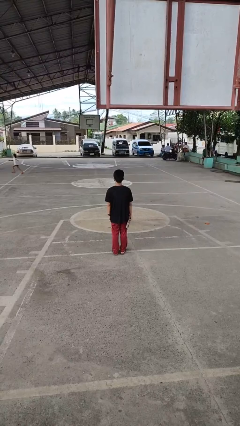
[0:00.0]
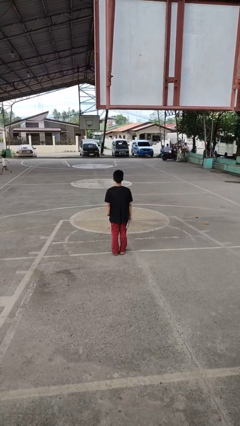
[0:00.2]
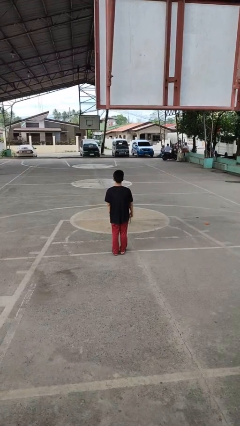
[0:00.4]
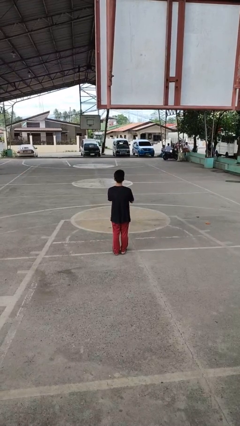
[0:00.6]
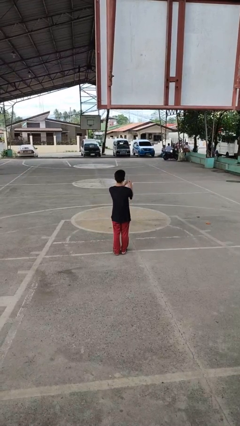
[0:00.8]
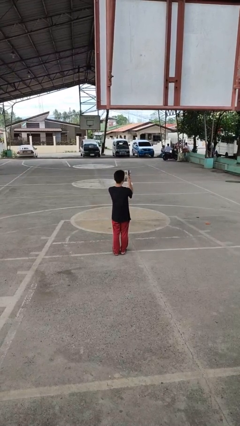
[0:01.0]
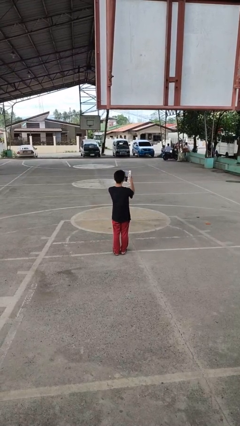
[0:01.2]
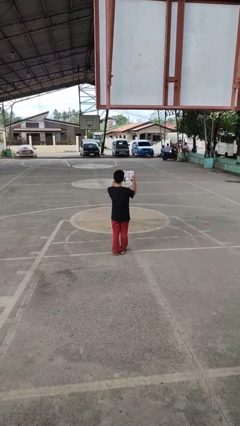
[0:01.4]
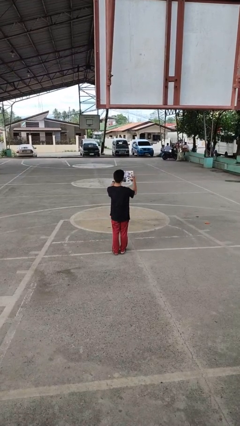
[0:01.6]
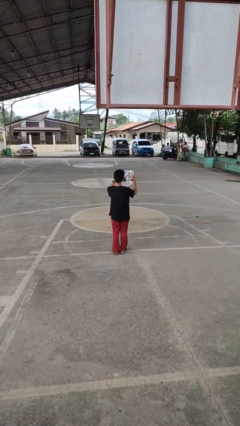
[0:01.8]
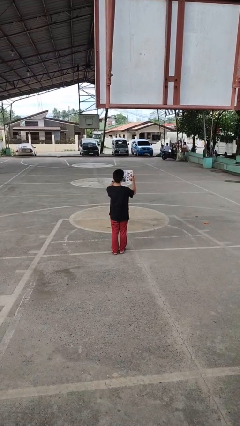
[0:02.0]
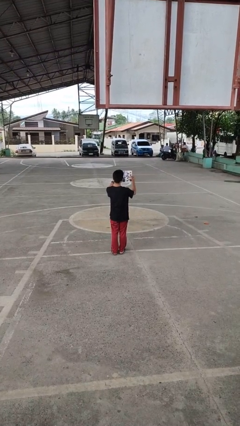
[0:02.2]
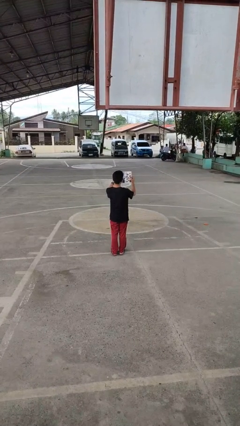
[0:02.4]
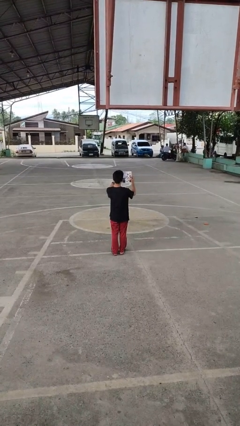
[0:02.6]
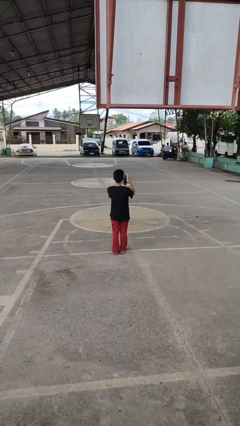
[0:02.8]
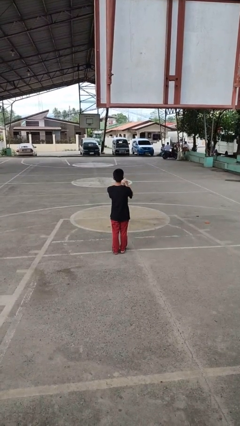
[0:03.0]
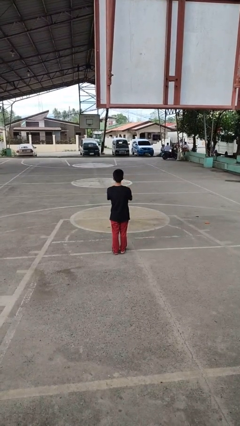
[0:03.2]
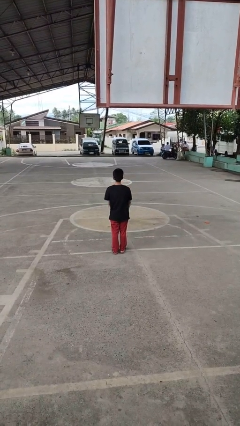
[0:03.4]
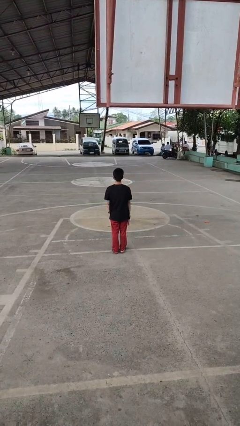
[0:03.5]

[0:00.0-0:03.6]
person reads magazine

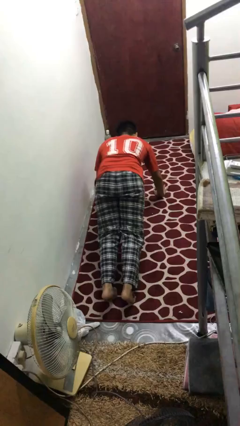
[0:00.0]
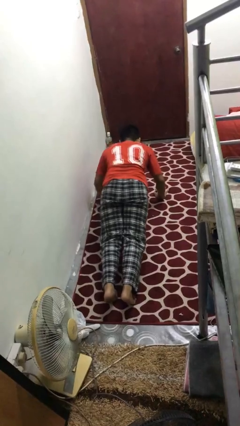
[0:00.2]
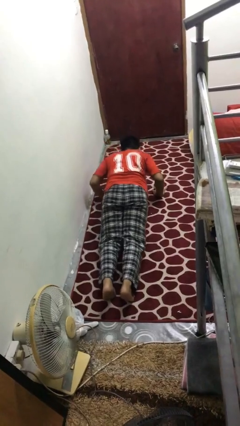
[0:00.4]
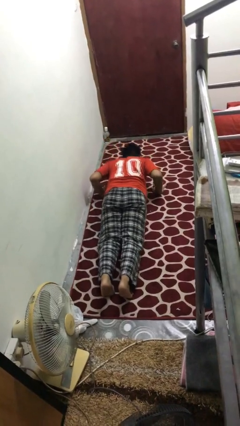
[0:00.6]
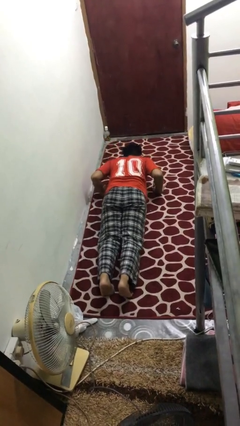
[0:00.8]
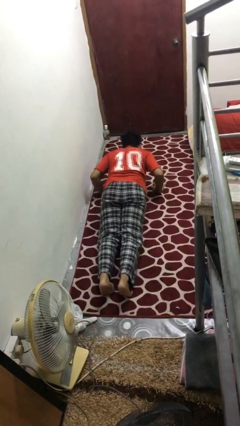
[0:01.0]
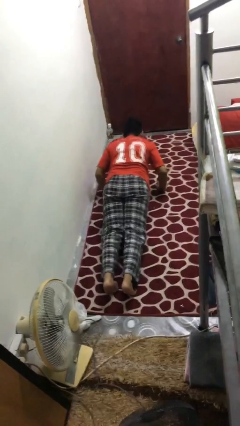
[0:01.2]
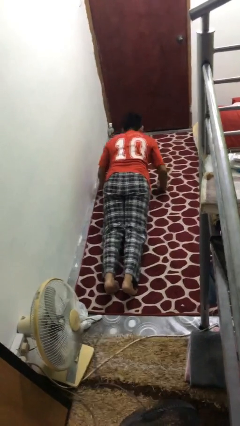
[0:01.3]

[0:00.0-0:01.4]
person exercises with pushup

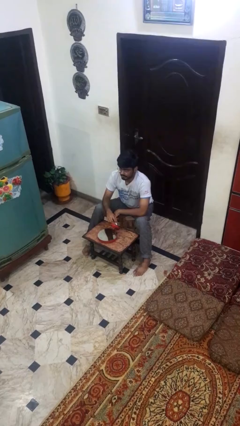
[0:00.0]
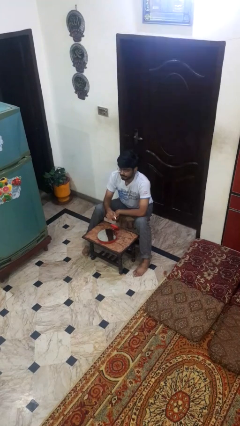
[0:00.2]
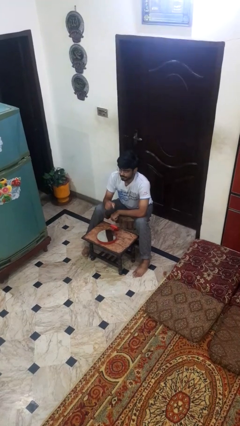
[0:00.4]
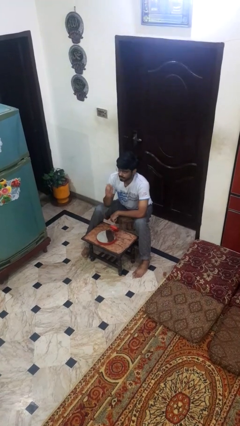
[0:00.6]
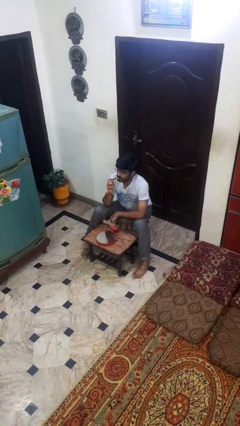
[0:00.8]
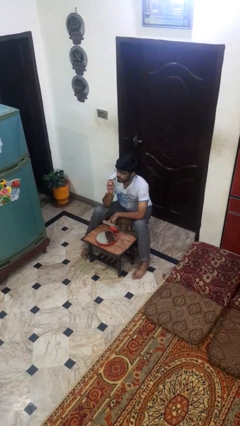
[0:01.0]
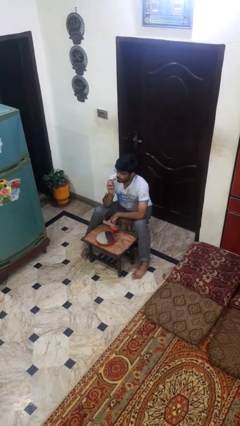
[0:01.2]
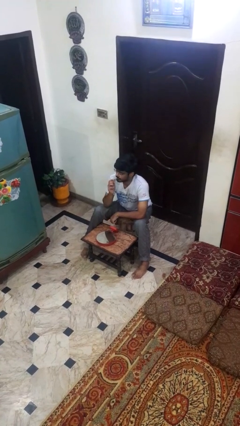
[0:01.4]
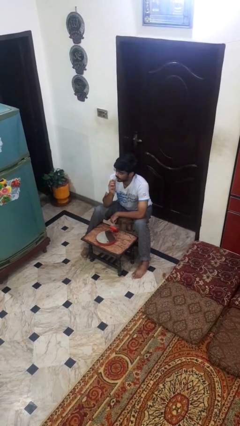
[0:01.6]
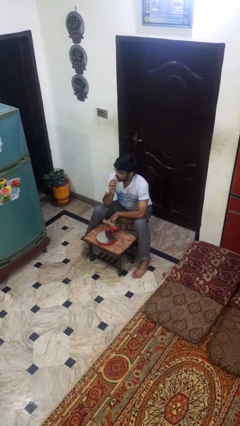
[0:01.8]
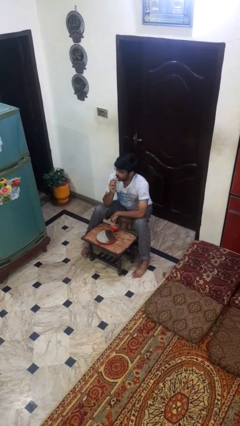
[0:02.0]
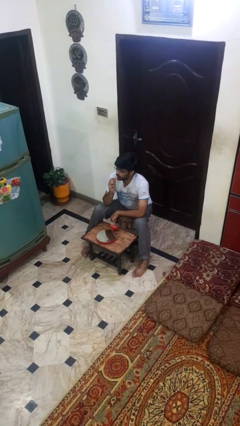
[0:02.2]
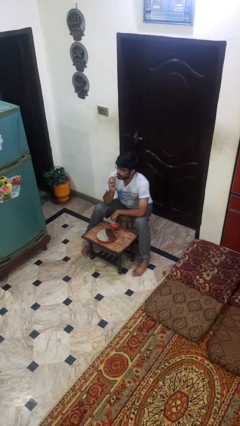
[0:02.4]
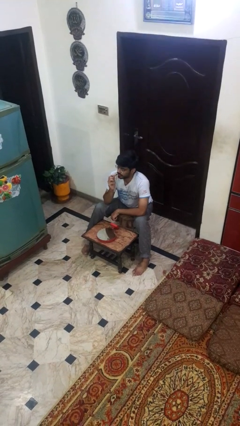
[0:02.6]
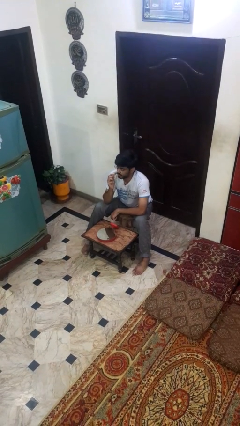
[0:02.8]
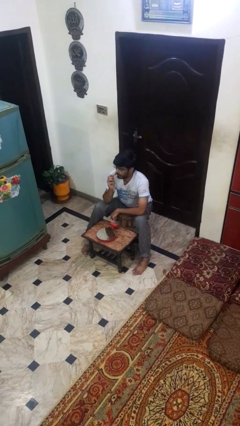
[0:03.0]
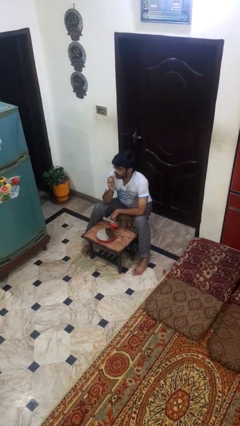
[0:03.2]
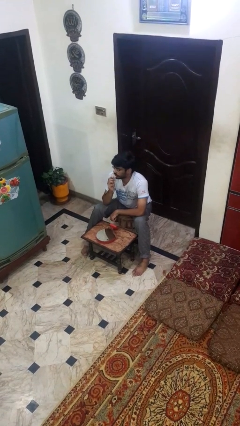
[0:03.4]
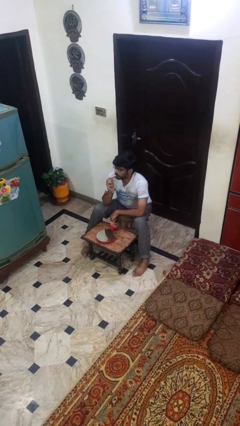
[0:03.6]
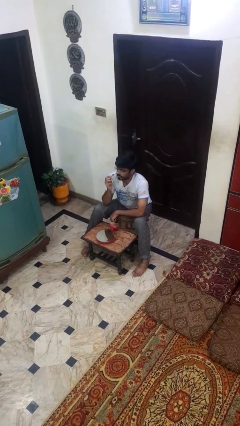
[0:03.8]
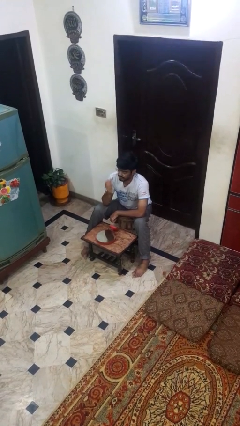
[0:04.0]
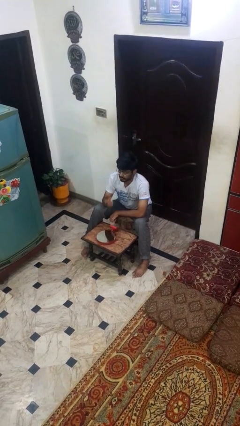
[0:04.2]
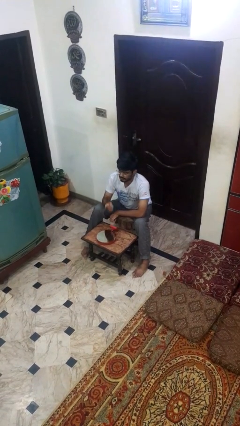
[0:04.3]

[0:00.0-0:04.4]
person applies lip makeup

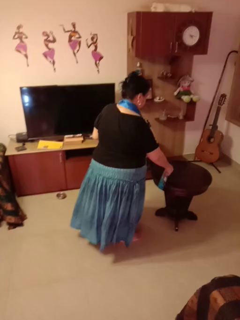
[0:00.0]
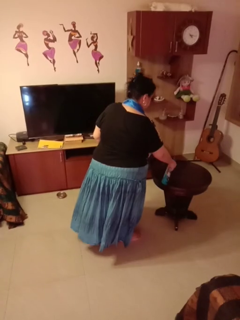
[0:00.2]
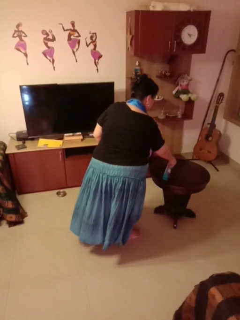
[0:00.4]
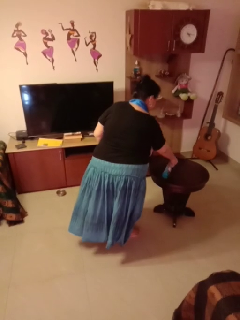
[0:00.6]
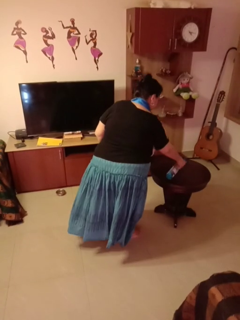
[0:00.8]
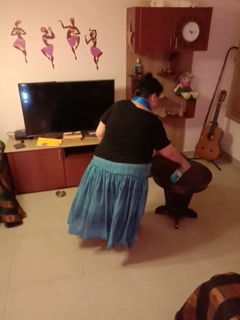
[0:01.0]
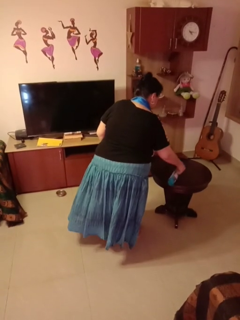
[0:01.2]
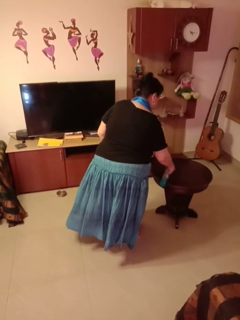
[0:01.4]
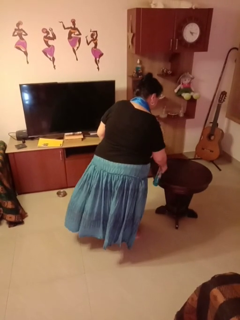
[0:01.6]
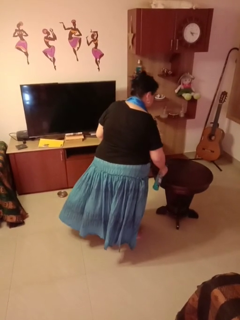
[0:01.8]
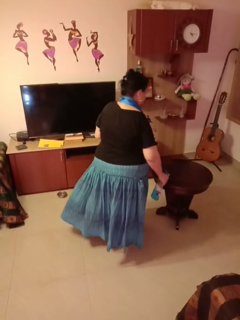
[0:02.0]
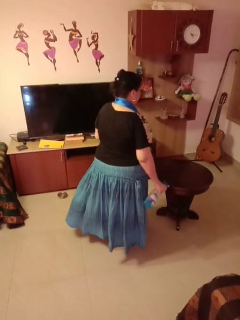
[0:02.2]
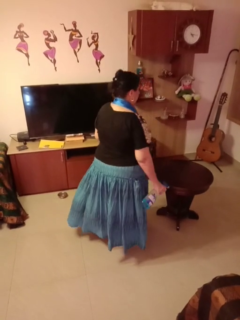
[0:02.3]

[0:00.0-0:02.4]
person sprays from bottle

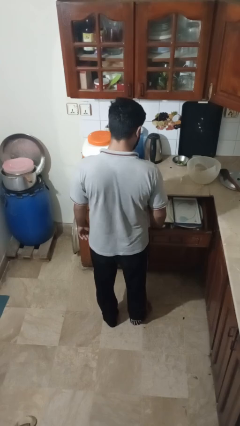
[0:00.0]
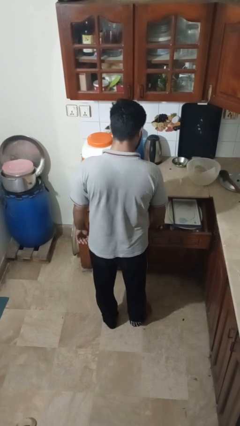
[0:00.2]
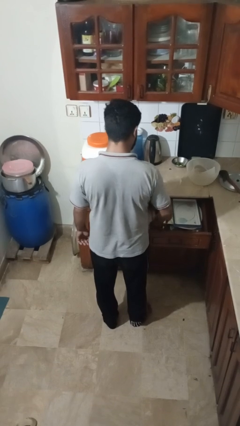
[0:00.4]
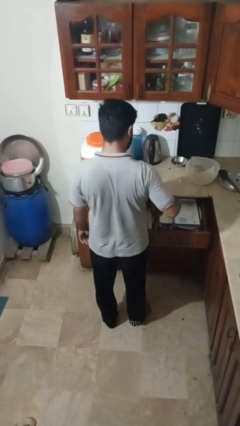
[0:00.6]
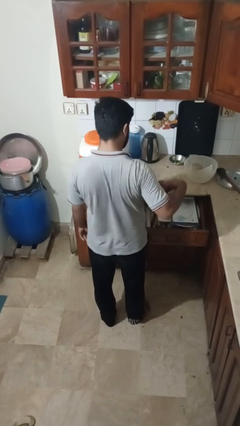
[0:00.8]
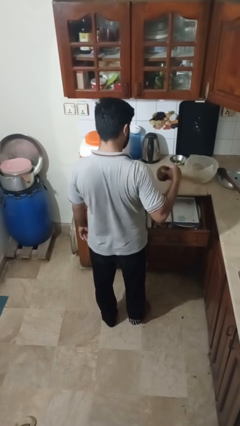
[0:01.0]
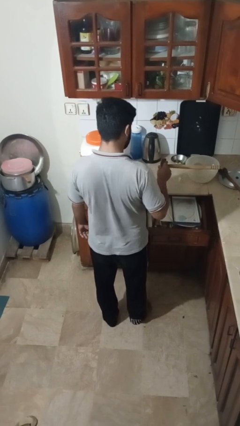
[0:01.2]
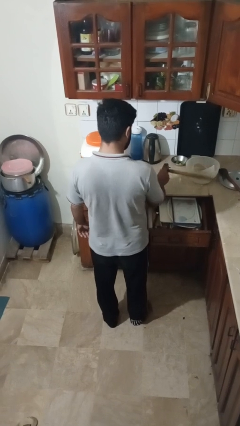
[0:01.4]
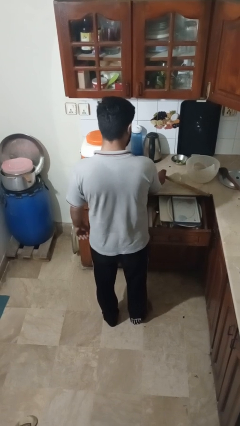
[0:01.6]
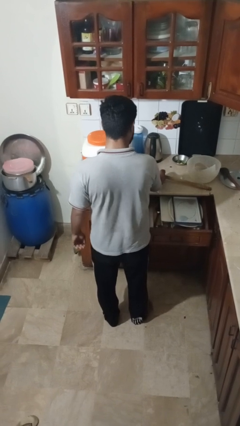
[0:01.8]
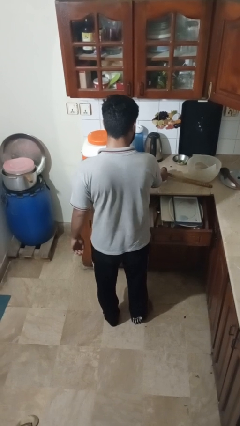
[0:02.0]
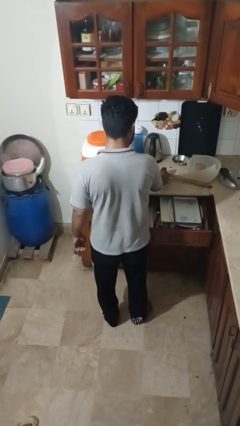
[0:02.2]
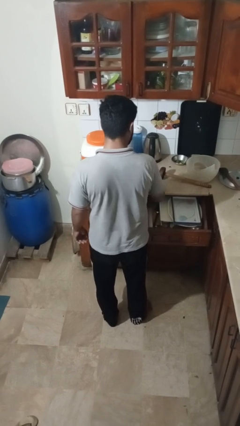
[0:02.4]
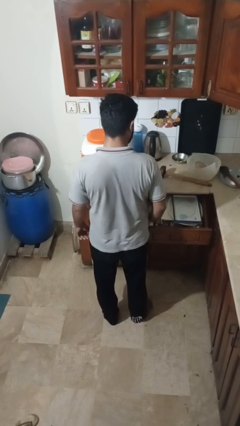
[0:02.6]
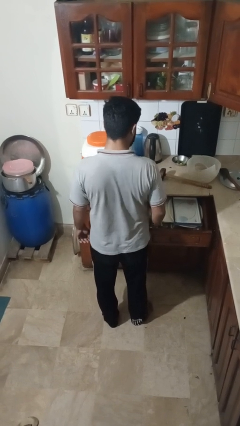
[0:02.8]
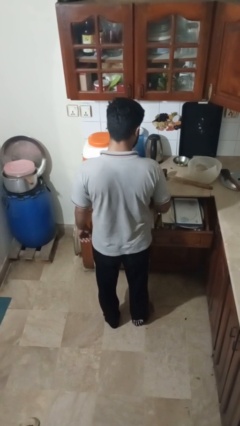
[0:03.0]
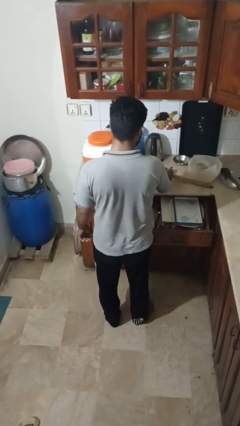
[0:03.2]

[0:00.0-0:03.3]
person takes object from kitchen drawer

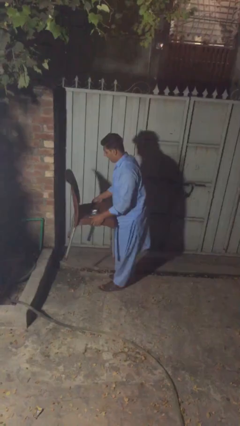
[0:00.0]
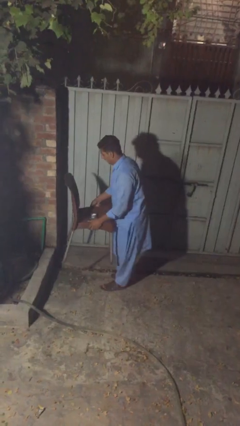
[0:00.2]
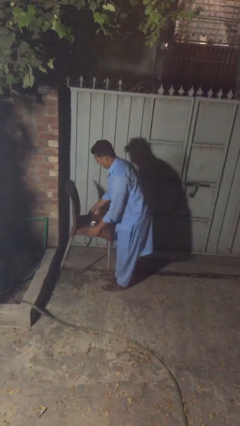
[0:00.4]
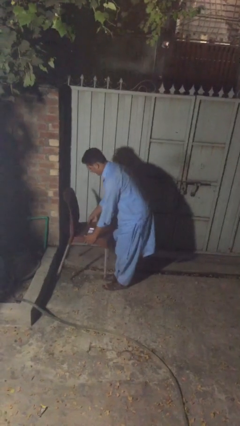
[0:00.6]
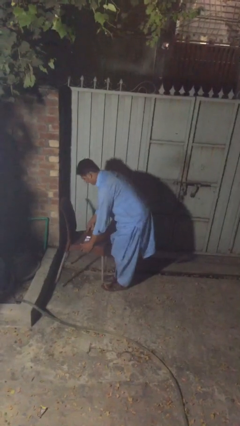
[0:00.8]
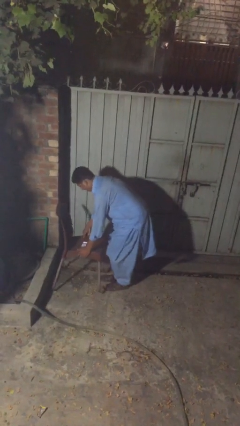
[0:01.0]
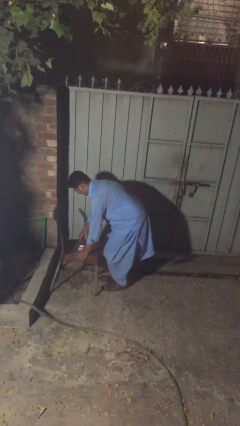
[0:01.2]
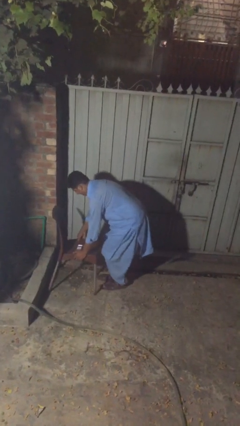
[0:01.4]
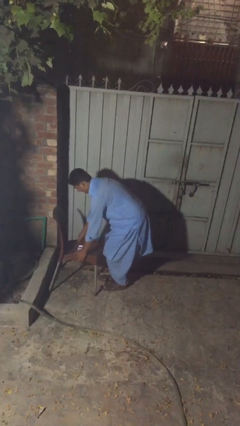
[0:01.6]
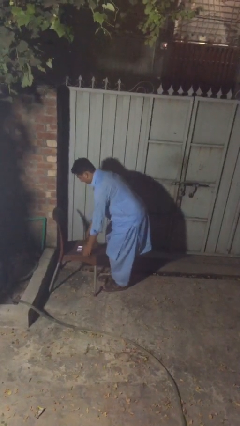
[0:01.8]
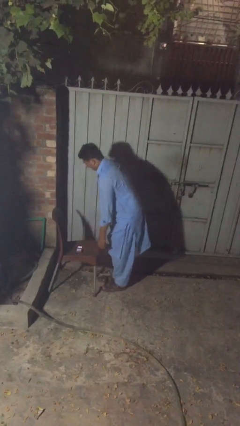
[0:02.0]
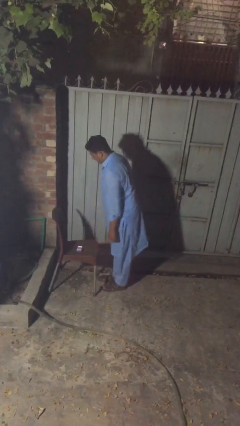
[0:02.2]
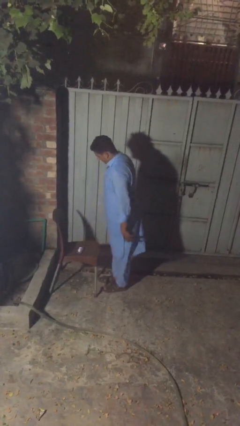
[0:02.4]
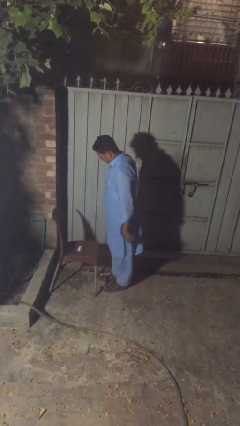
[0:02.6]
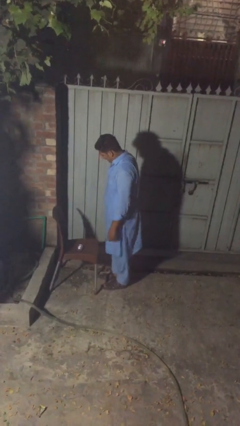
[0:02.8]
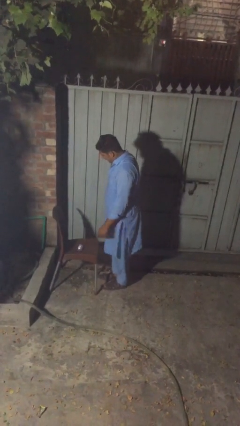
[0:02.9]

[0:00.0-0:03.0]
person puts down object on floor

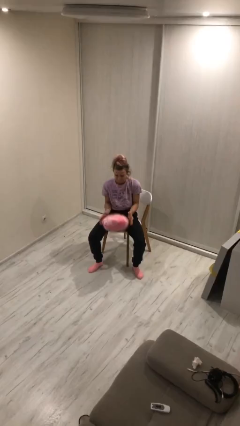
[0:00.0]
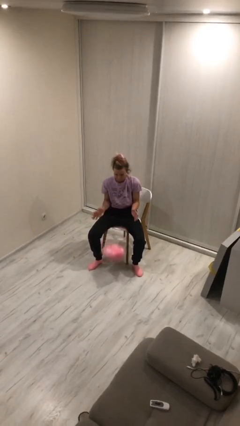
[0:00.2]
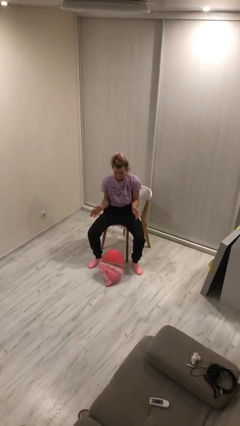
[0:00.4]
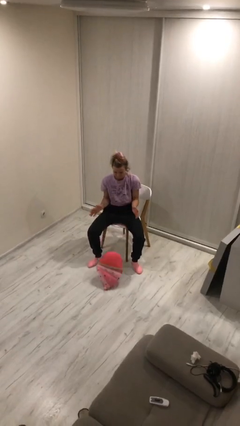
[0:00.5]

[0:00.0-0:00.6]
person drops object
